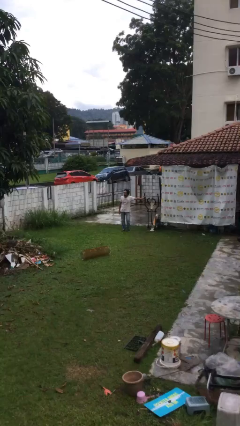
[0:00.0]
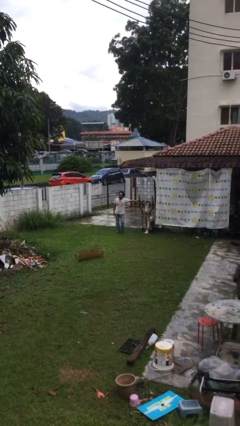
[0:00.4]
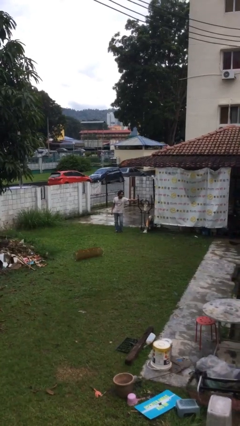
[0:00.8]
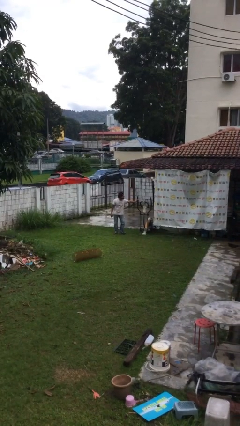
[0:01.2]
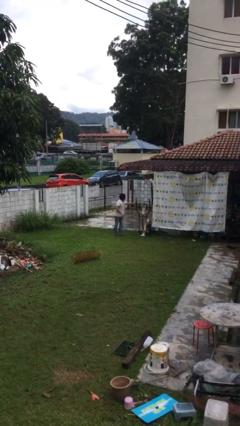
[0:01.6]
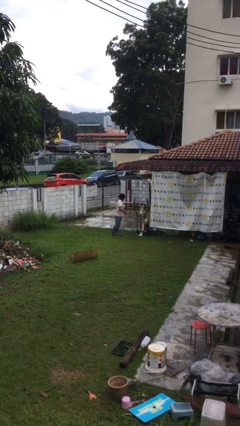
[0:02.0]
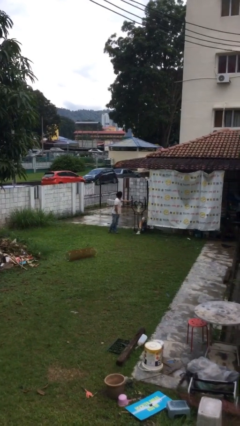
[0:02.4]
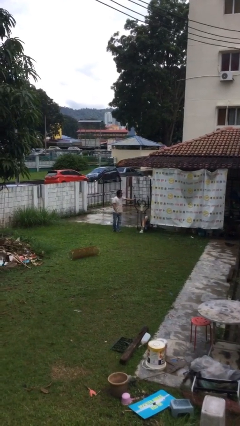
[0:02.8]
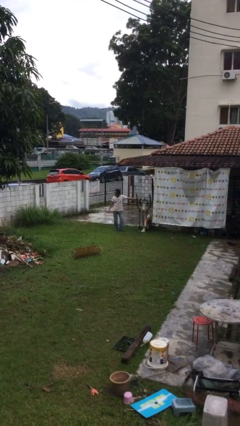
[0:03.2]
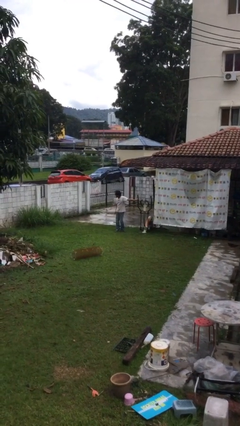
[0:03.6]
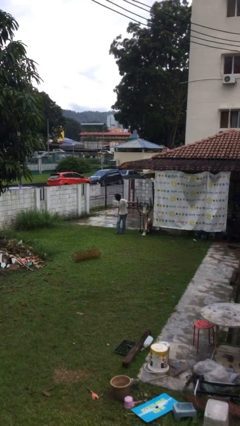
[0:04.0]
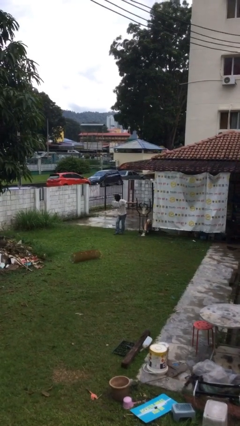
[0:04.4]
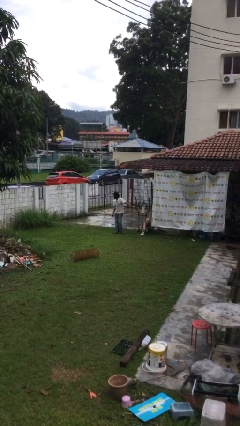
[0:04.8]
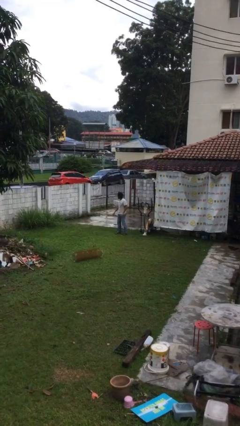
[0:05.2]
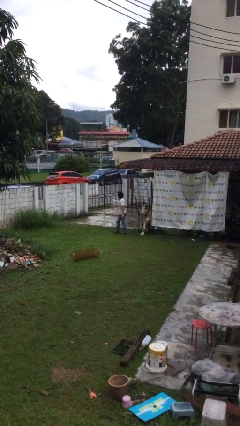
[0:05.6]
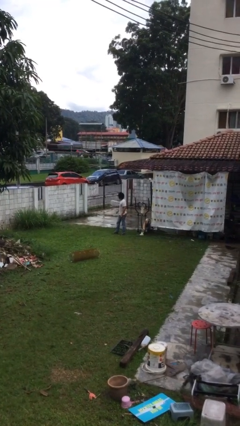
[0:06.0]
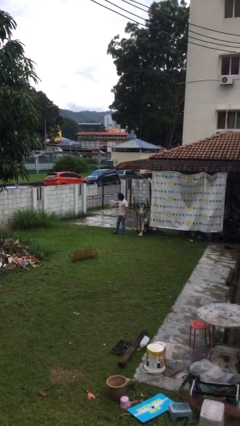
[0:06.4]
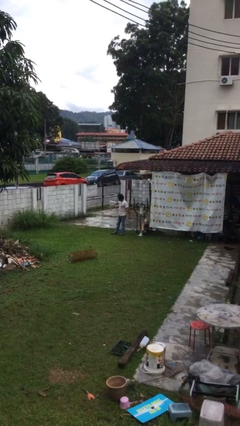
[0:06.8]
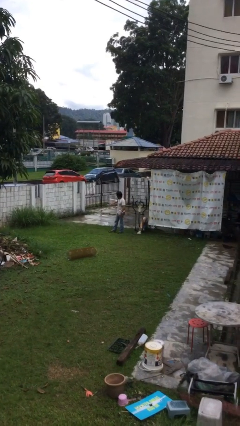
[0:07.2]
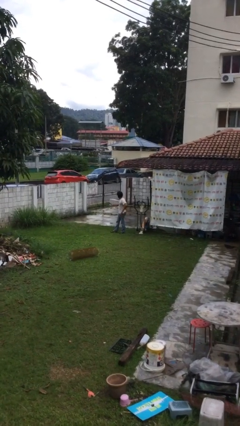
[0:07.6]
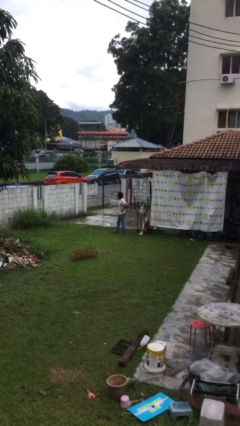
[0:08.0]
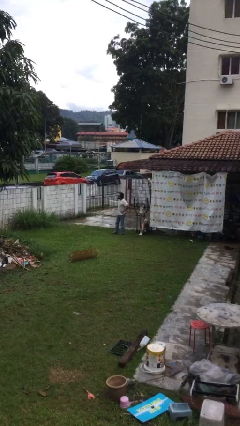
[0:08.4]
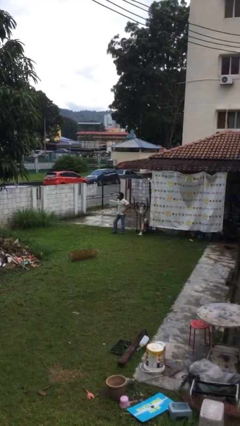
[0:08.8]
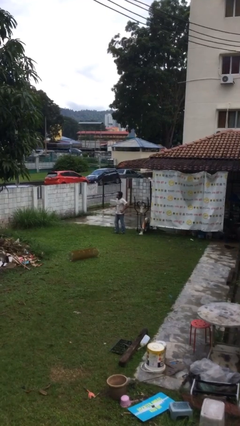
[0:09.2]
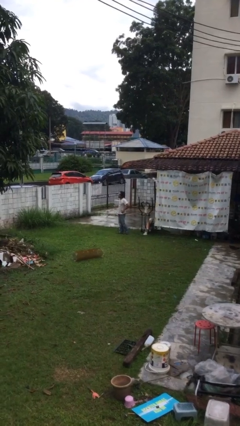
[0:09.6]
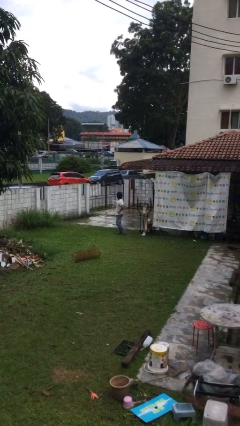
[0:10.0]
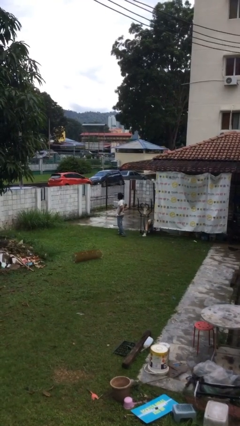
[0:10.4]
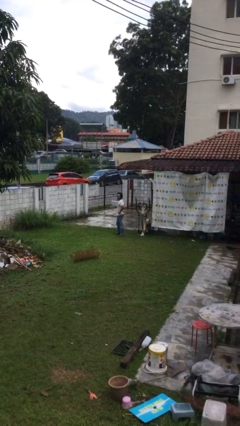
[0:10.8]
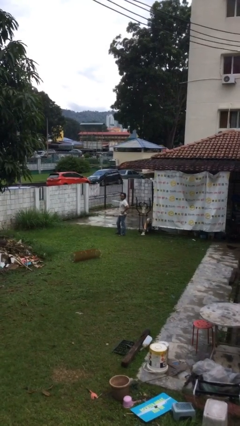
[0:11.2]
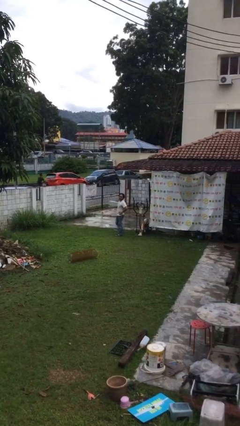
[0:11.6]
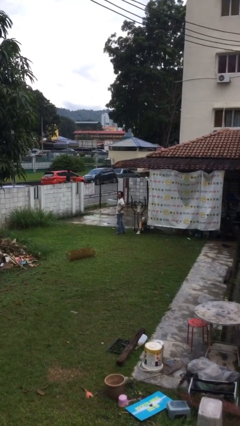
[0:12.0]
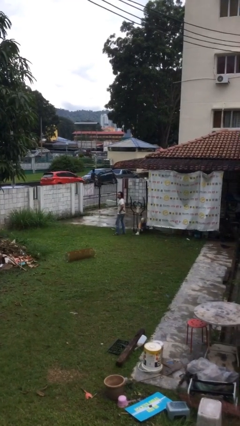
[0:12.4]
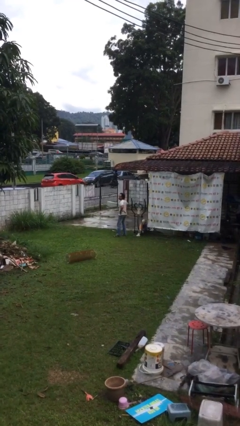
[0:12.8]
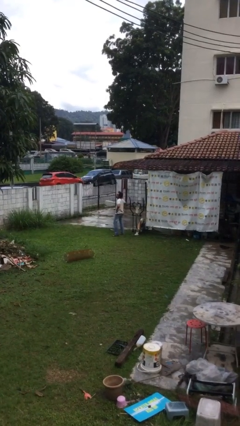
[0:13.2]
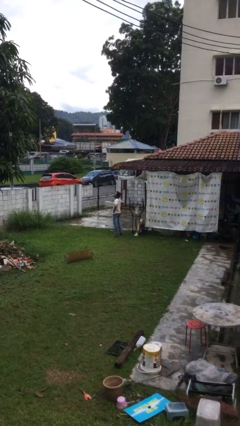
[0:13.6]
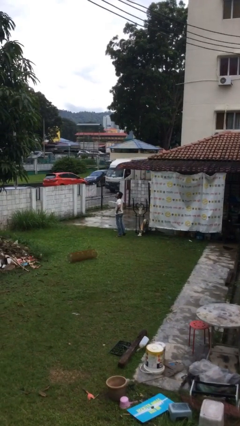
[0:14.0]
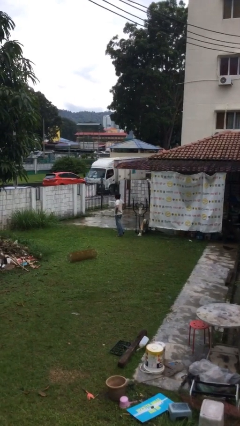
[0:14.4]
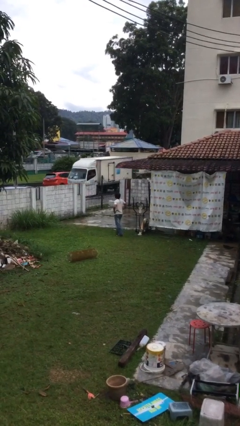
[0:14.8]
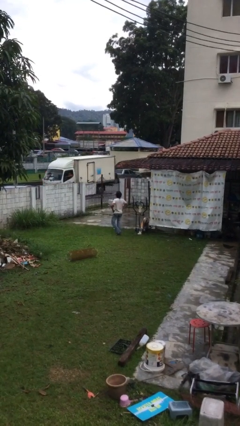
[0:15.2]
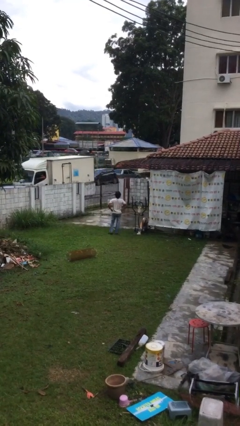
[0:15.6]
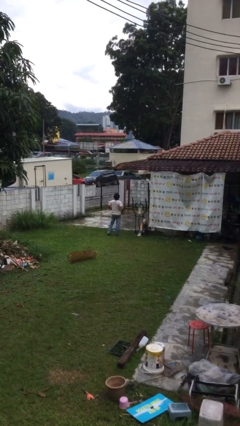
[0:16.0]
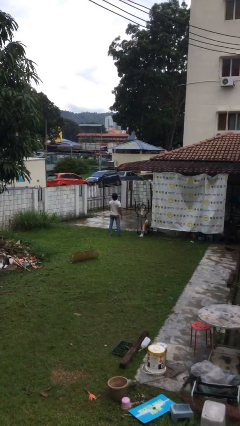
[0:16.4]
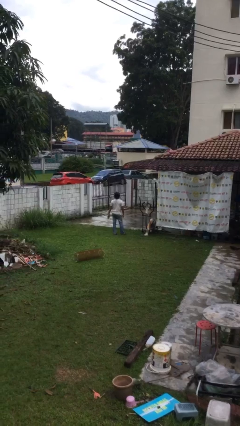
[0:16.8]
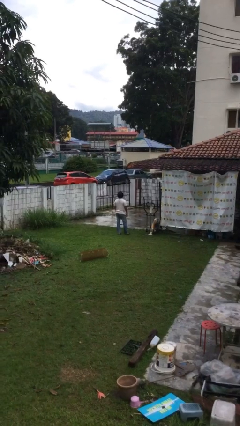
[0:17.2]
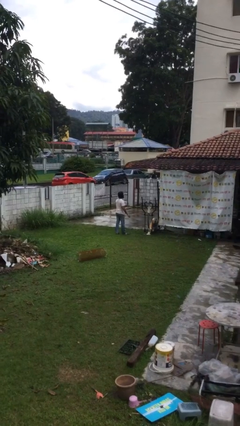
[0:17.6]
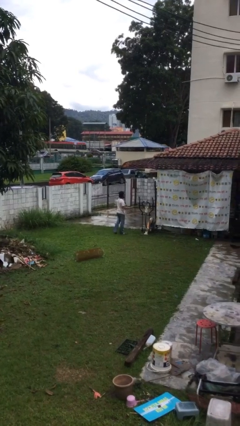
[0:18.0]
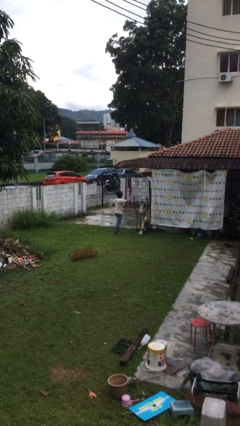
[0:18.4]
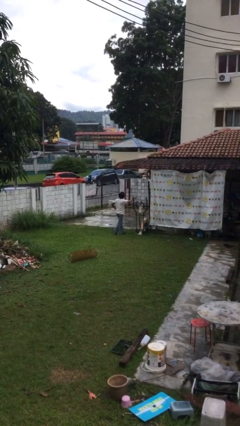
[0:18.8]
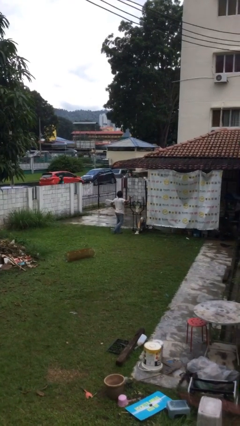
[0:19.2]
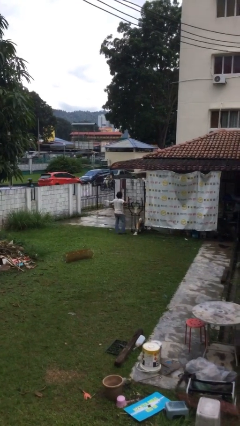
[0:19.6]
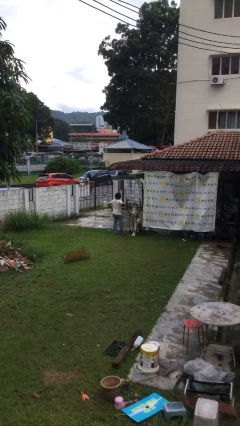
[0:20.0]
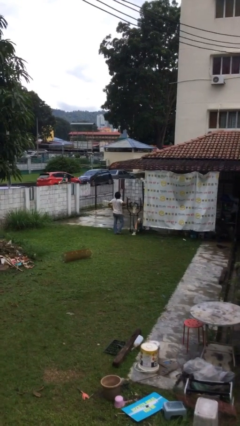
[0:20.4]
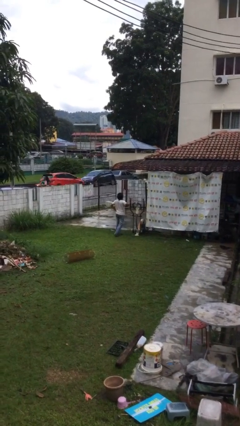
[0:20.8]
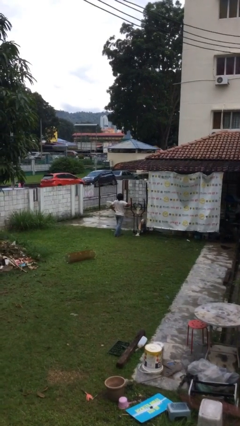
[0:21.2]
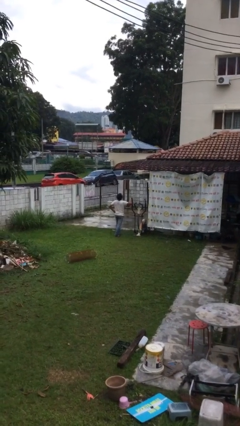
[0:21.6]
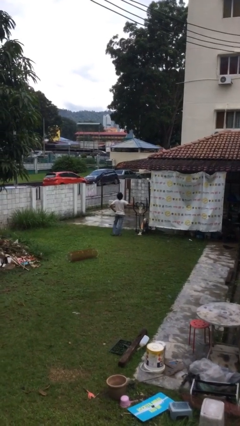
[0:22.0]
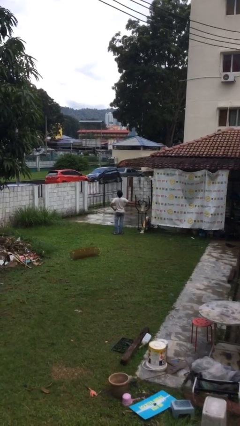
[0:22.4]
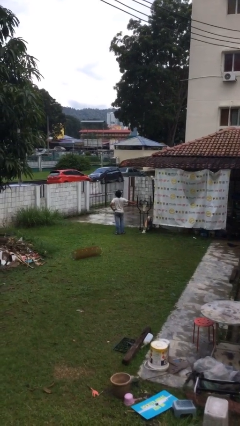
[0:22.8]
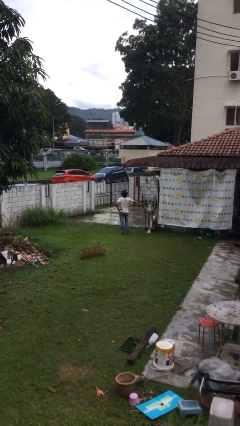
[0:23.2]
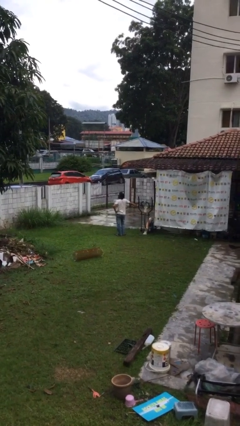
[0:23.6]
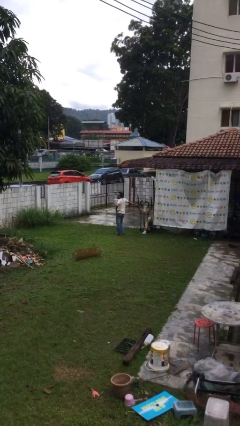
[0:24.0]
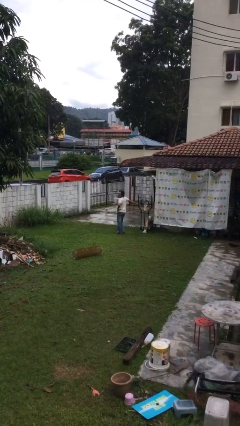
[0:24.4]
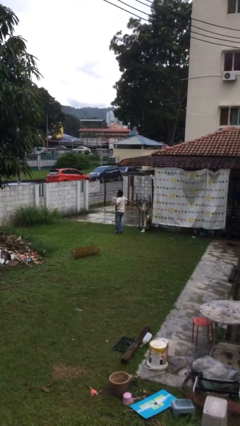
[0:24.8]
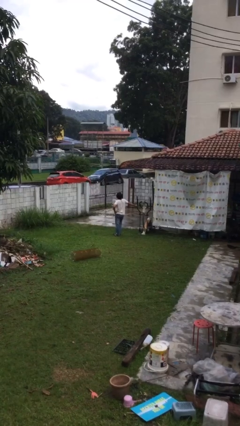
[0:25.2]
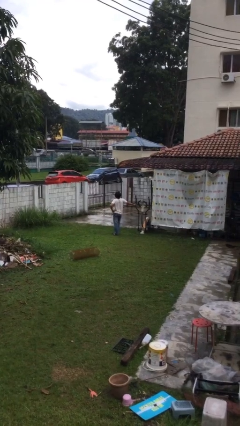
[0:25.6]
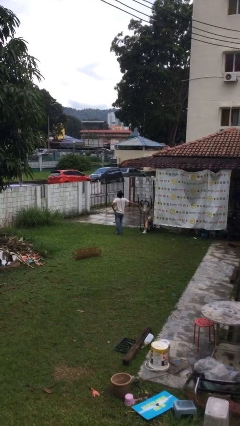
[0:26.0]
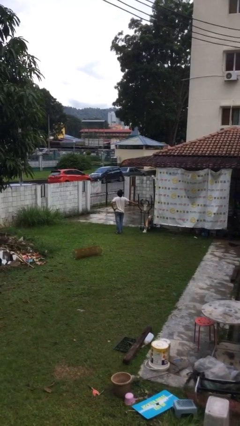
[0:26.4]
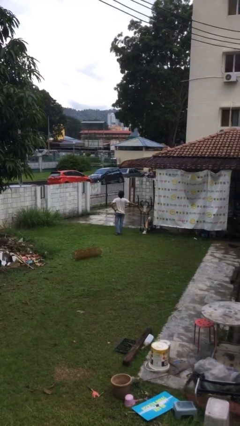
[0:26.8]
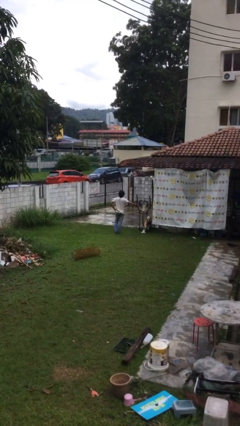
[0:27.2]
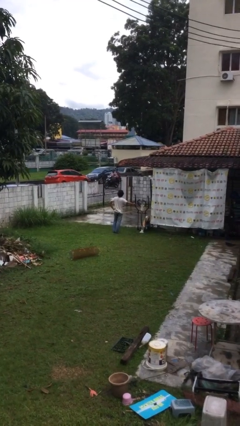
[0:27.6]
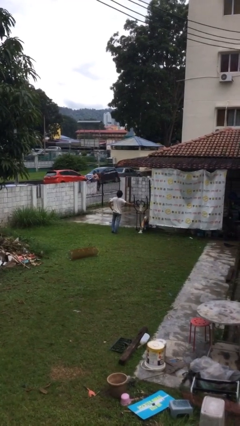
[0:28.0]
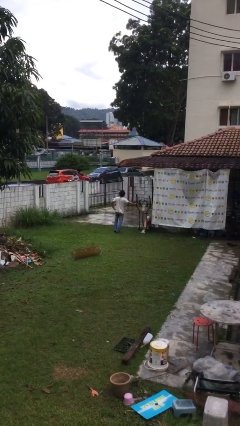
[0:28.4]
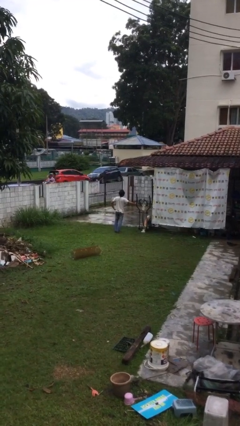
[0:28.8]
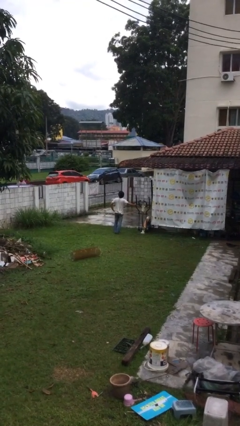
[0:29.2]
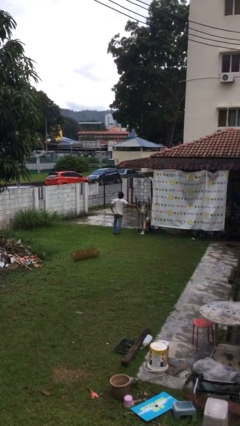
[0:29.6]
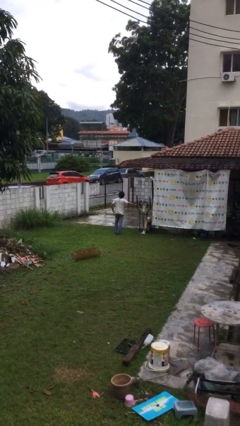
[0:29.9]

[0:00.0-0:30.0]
person walks

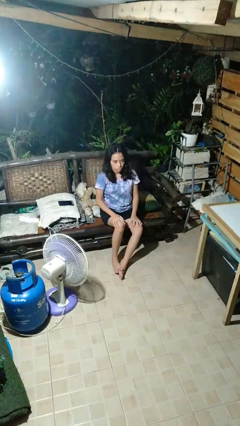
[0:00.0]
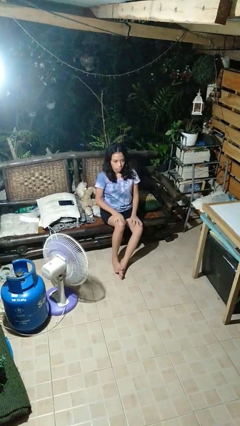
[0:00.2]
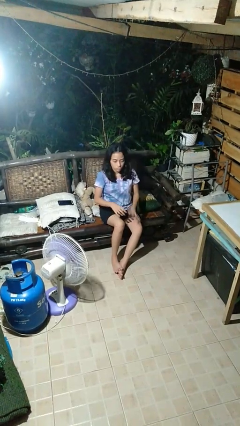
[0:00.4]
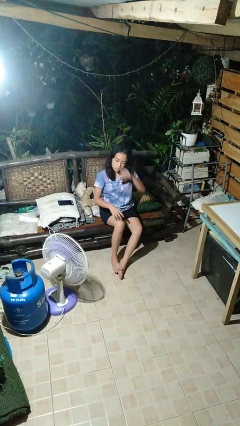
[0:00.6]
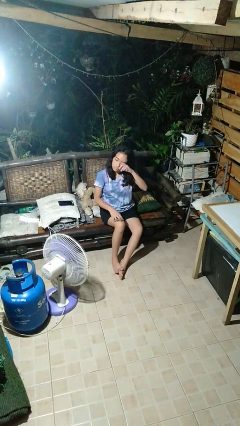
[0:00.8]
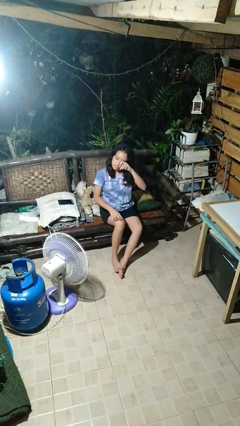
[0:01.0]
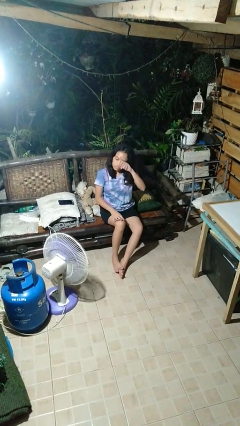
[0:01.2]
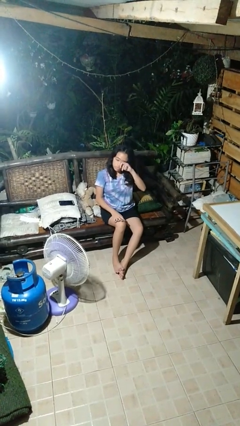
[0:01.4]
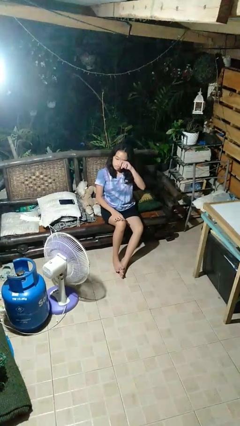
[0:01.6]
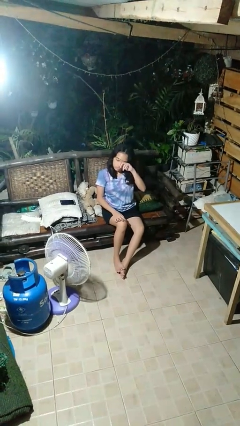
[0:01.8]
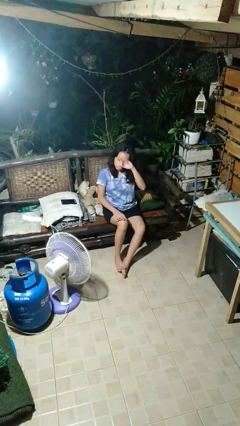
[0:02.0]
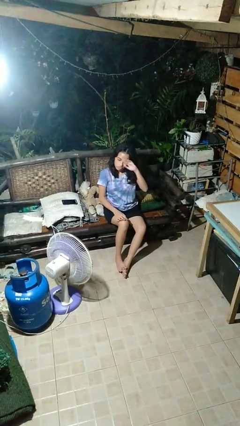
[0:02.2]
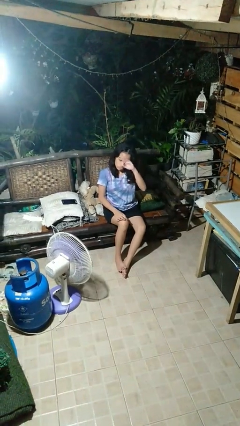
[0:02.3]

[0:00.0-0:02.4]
person rubs eyes

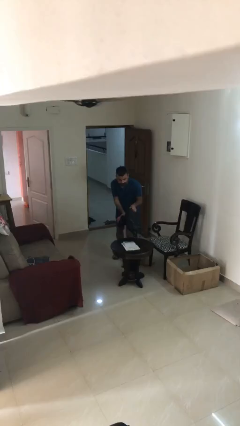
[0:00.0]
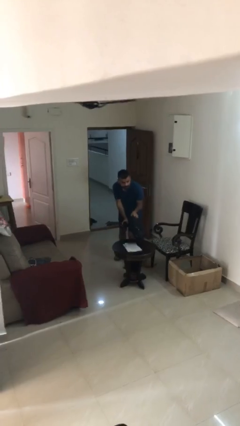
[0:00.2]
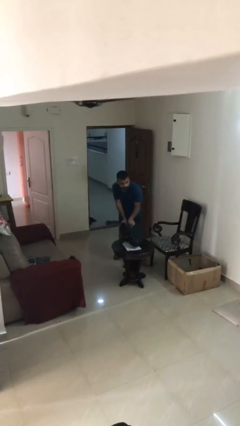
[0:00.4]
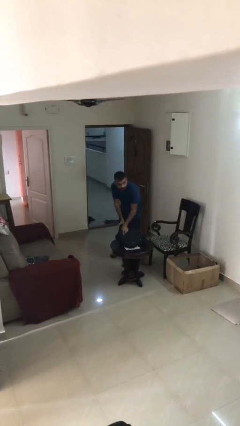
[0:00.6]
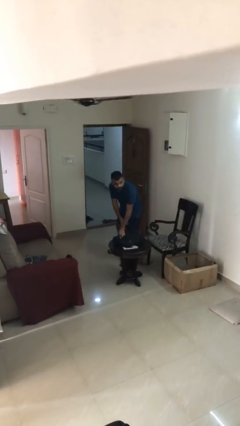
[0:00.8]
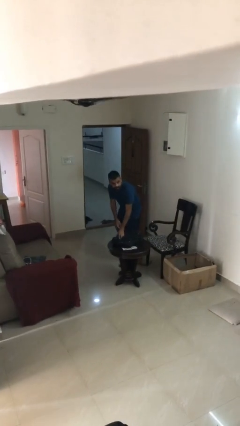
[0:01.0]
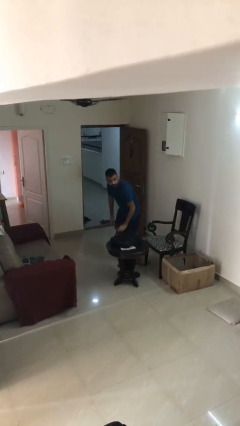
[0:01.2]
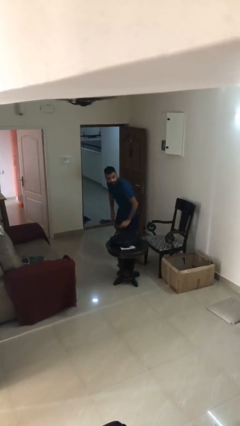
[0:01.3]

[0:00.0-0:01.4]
person puts down object on table
